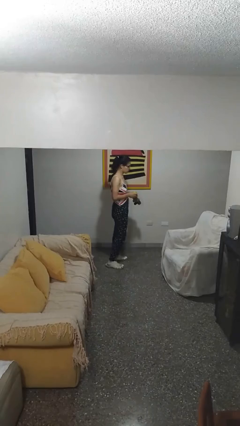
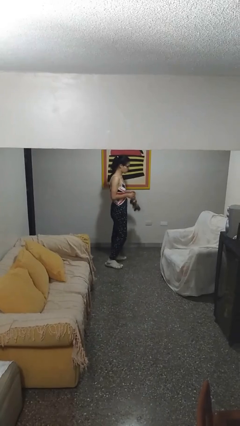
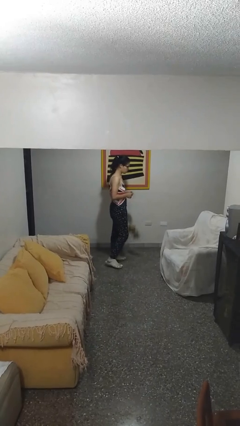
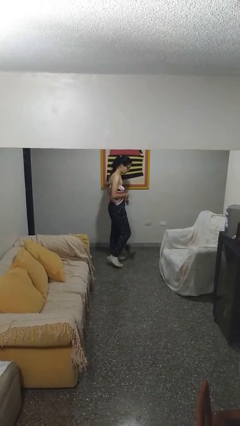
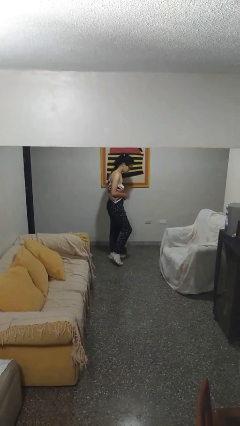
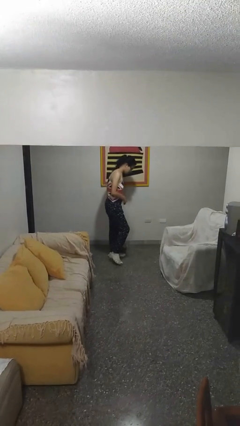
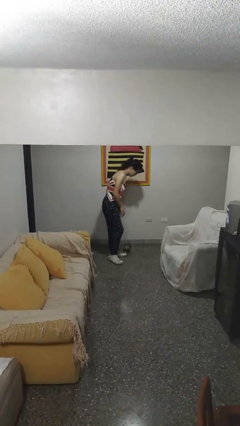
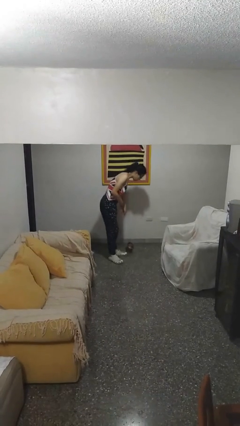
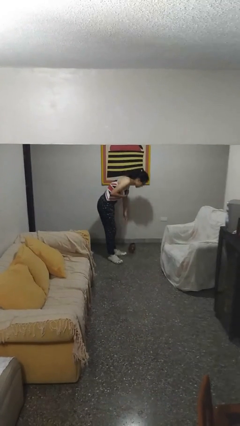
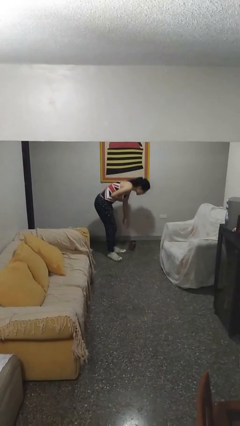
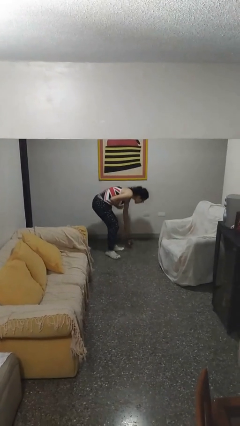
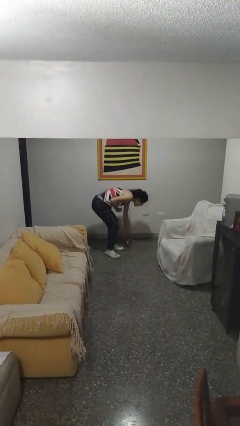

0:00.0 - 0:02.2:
person drops object

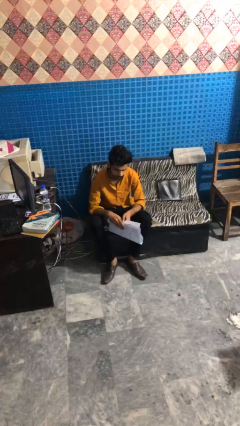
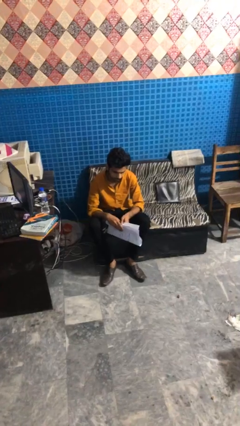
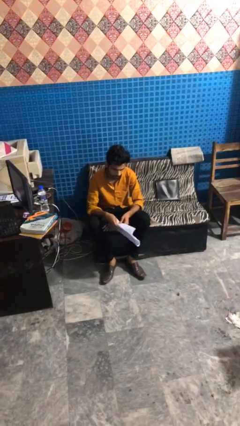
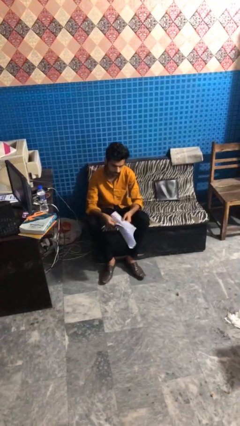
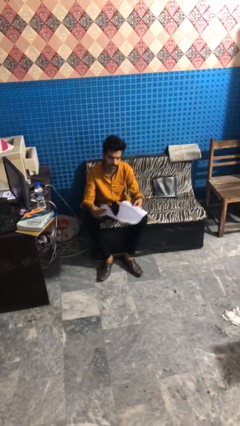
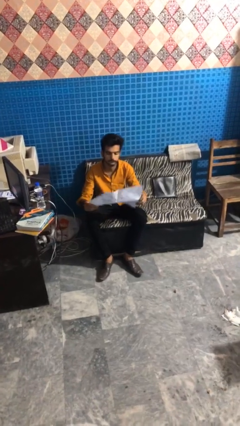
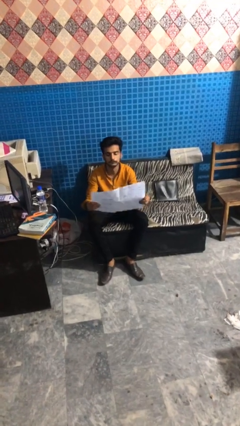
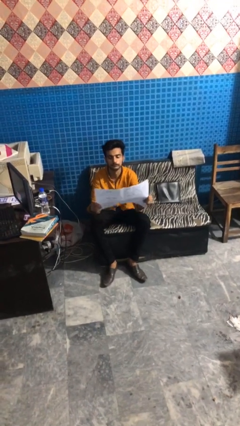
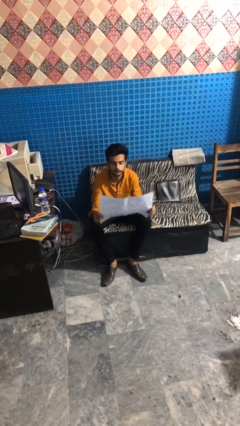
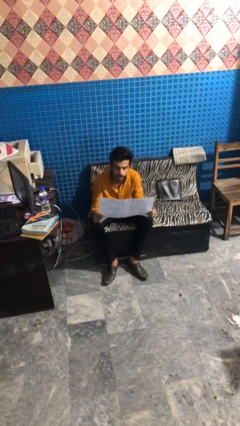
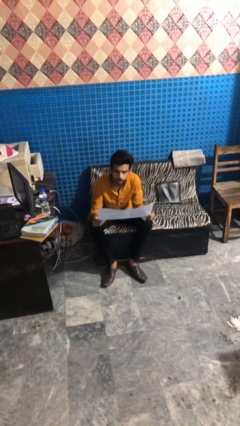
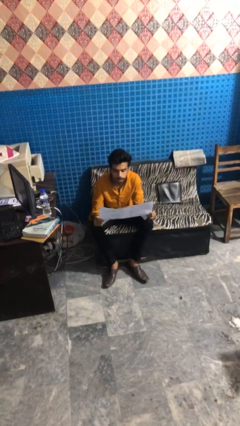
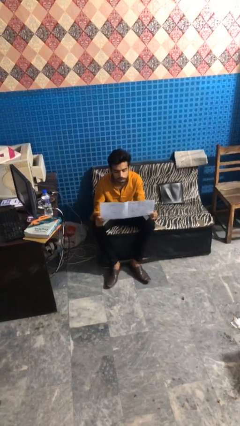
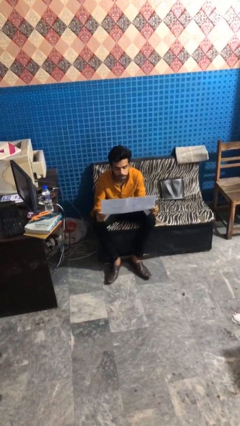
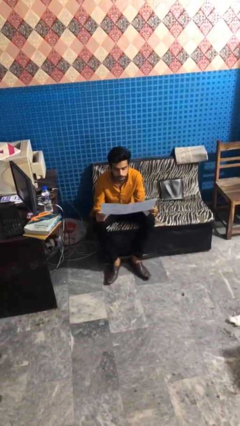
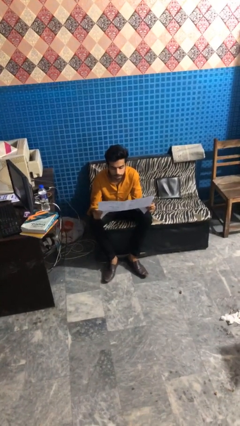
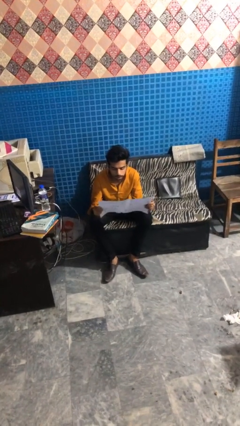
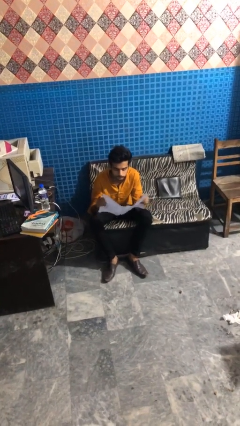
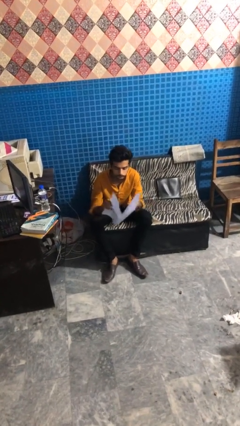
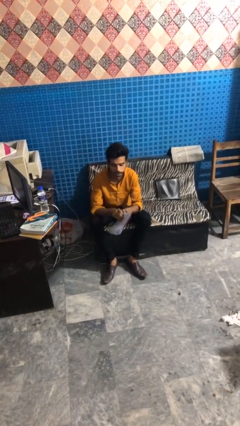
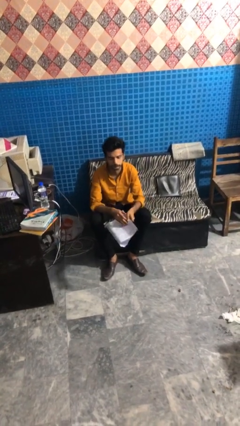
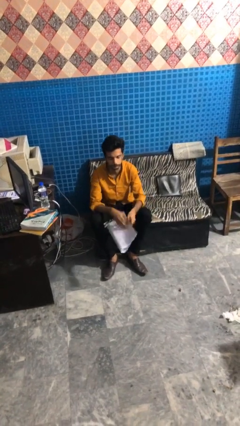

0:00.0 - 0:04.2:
person reads newspaper

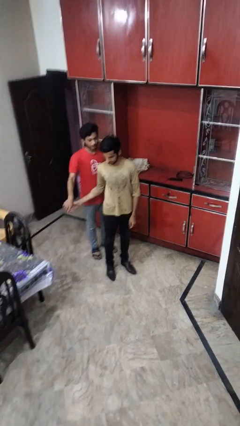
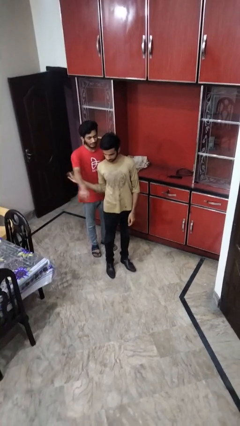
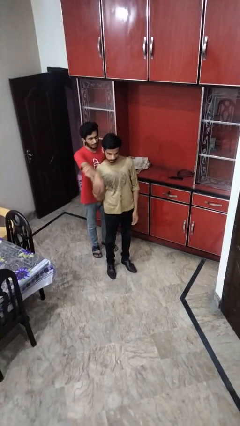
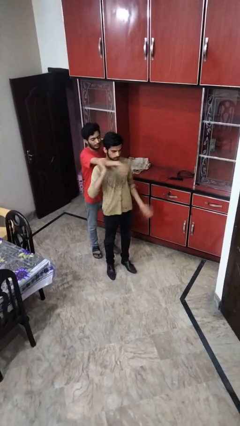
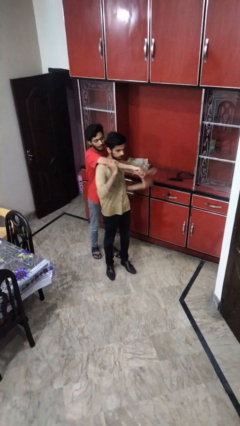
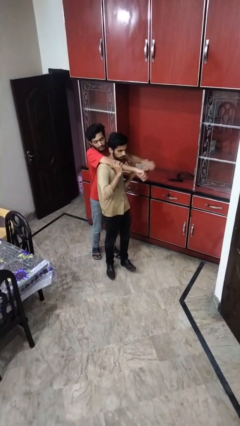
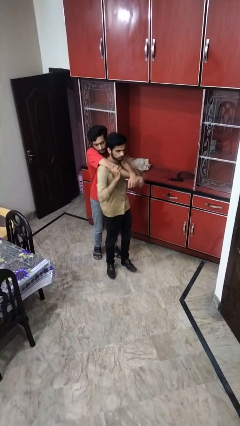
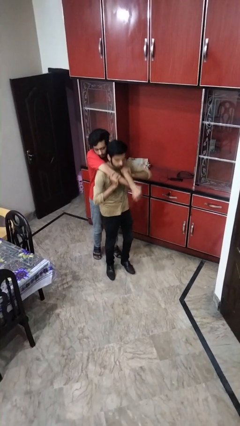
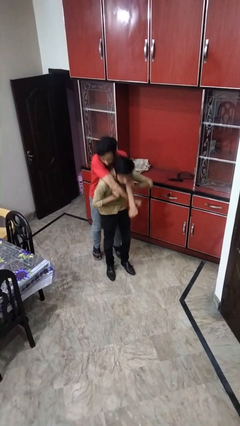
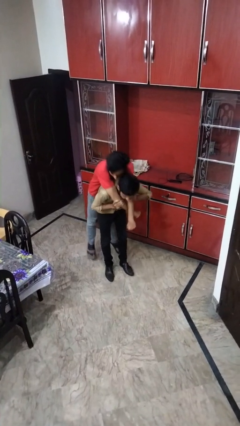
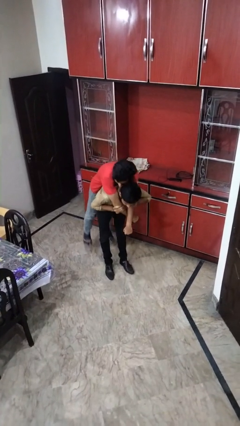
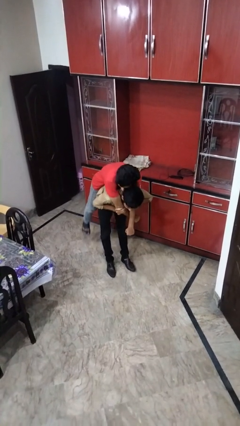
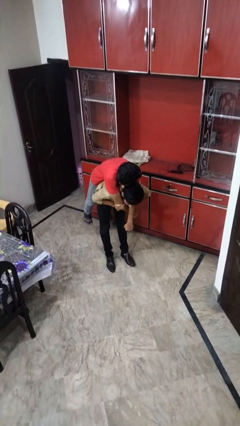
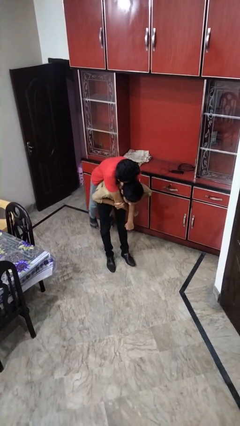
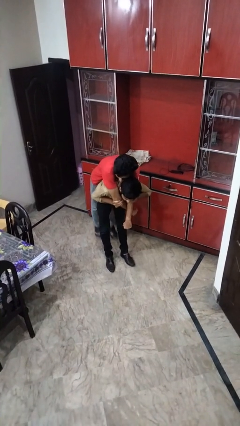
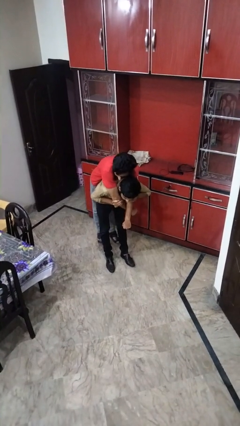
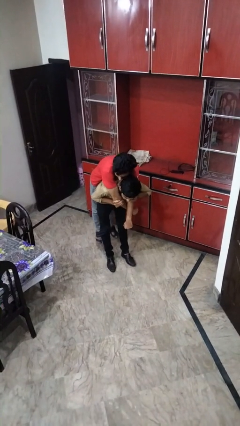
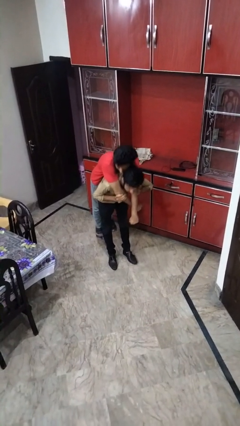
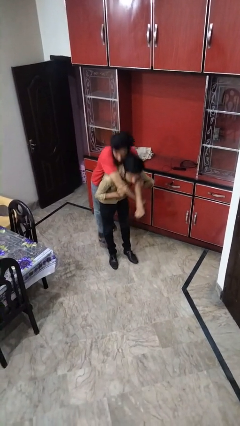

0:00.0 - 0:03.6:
person carries person over shoulder

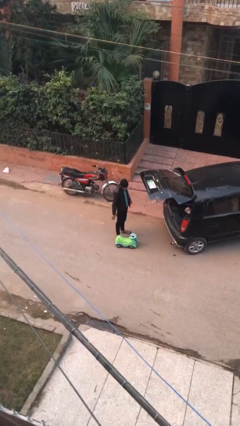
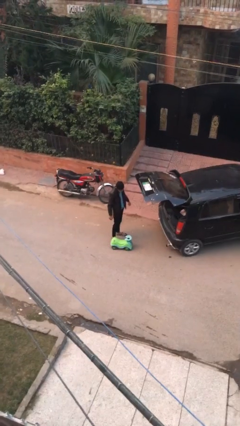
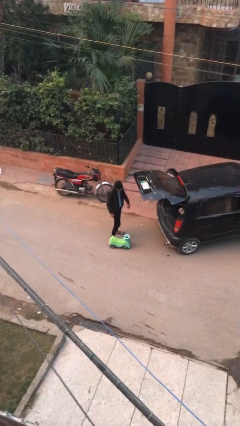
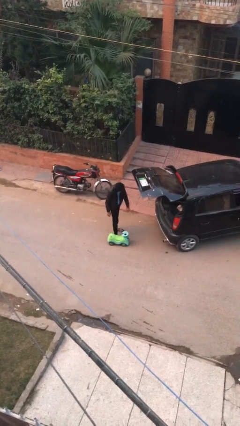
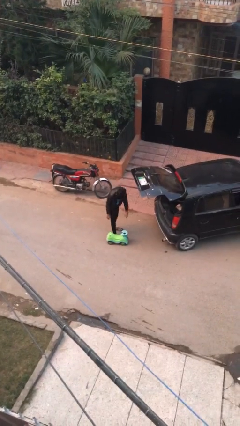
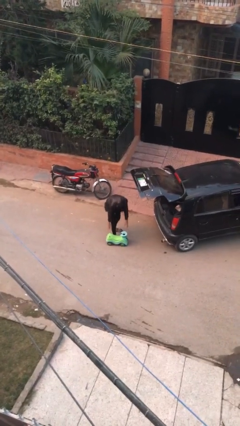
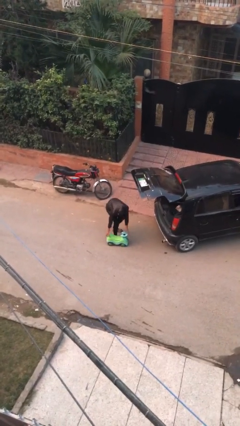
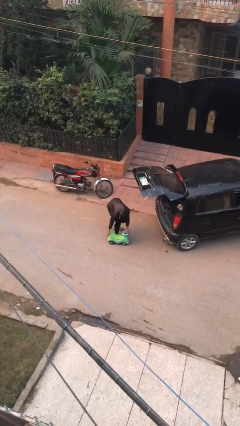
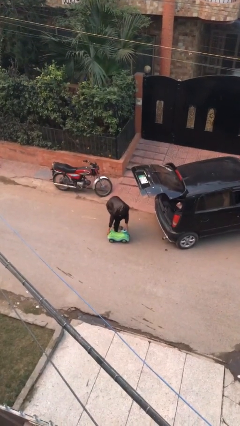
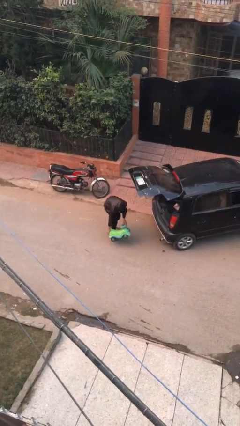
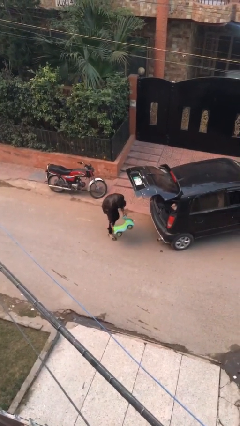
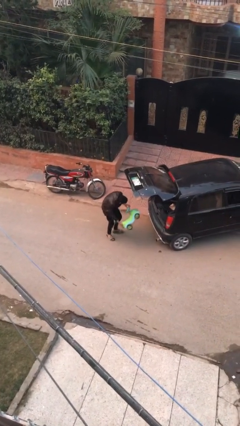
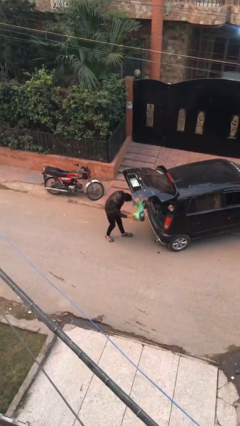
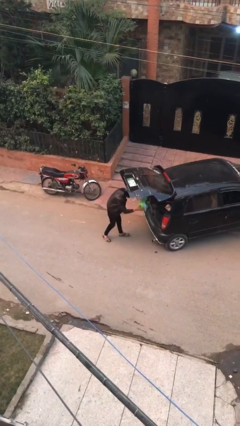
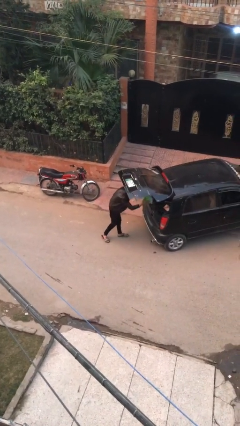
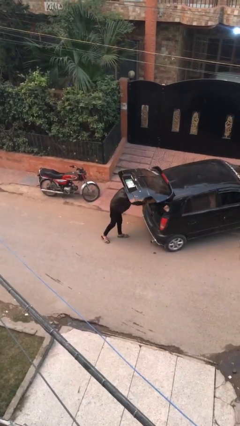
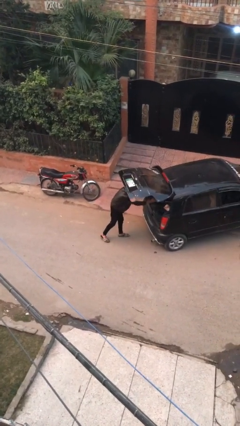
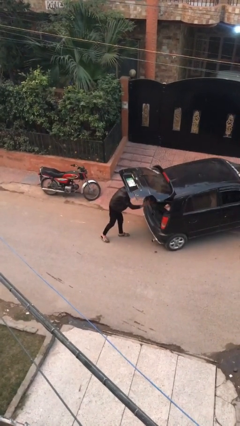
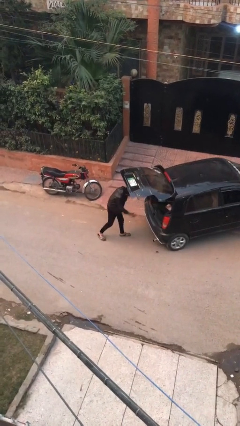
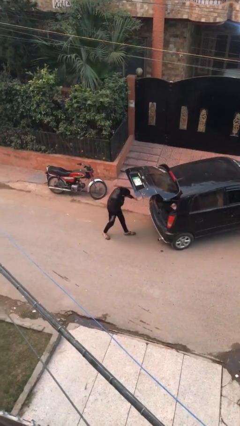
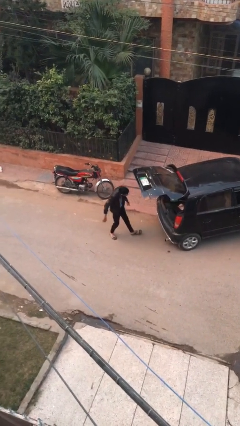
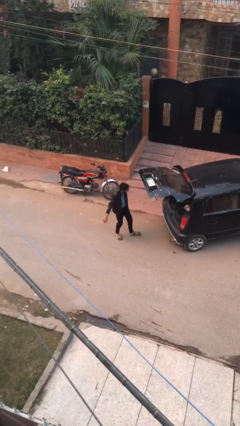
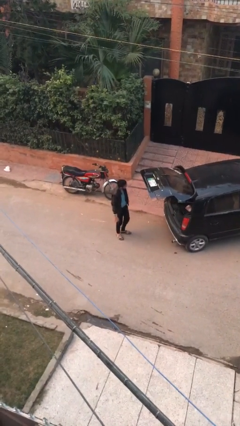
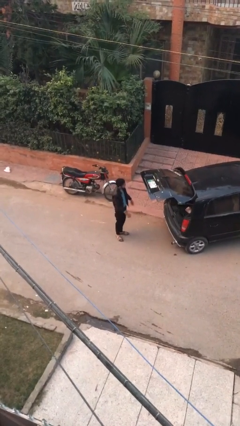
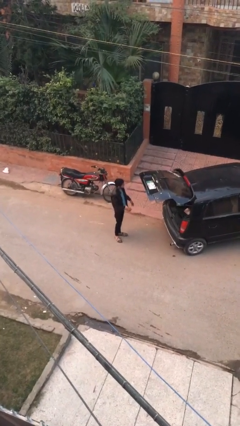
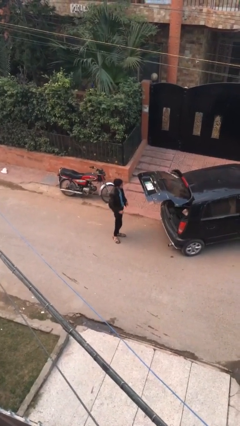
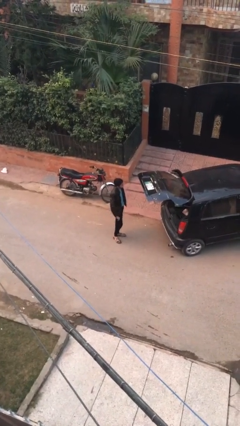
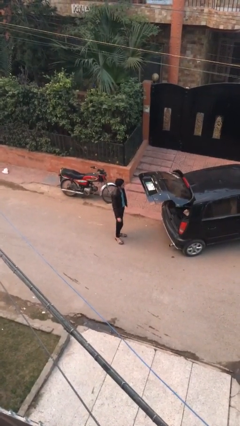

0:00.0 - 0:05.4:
person loads car

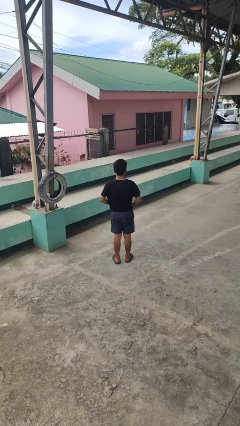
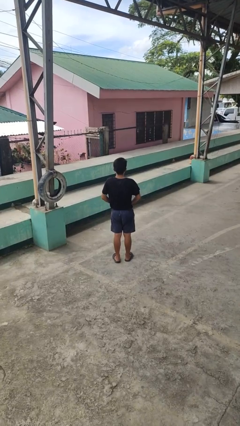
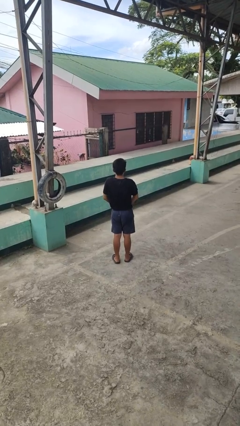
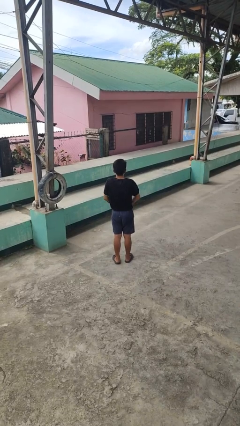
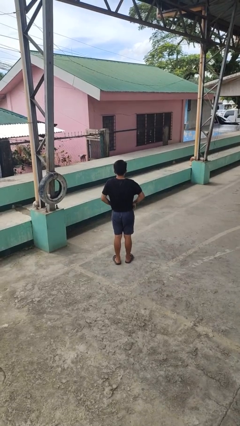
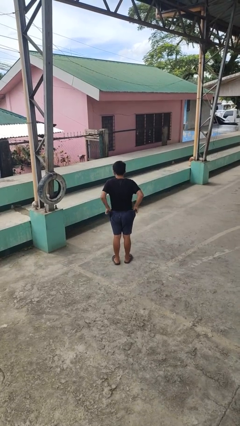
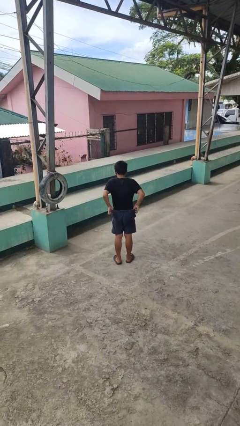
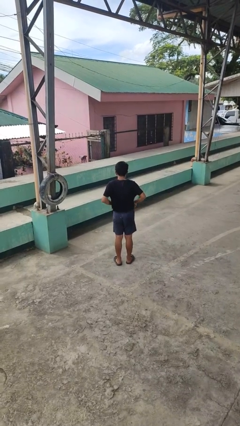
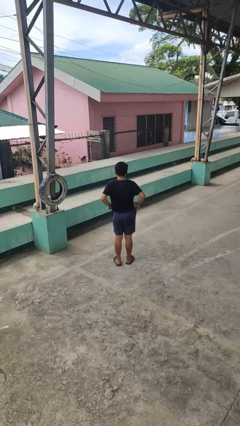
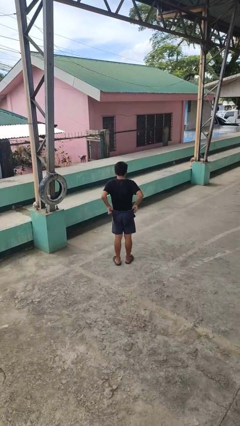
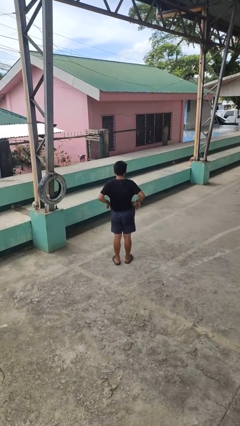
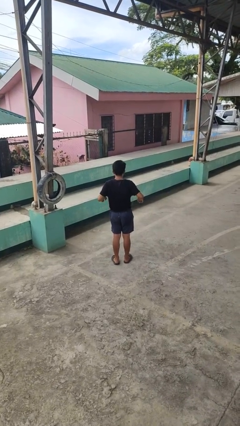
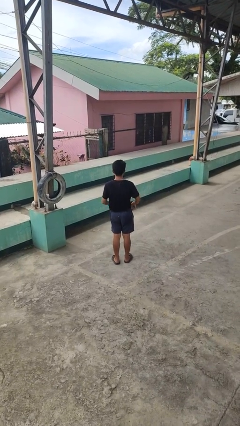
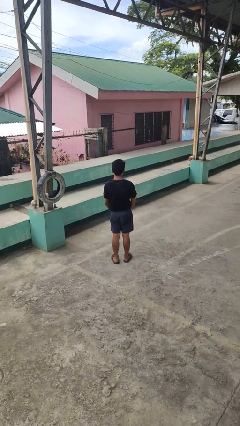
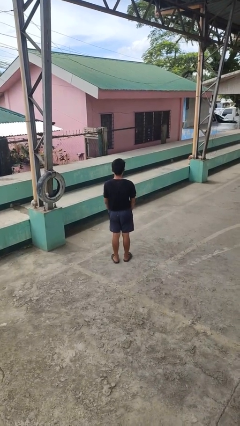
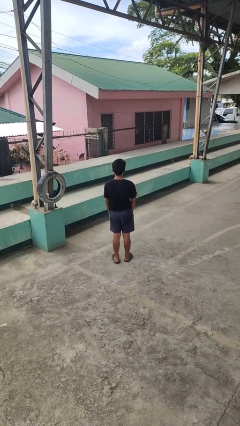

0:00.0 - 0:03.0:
person hikes up pants
